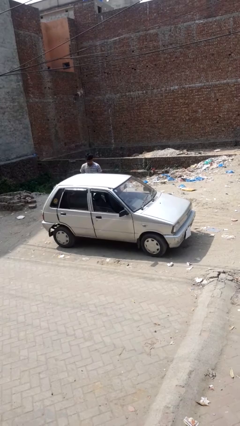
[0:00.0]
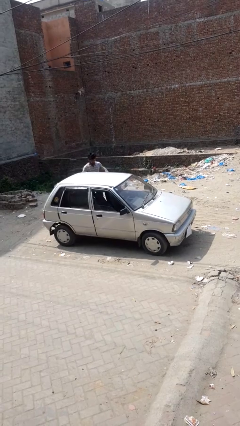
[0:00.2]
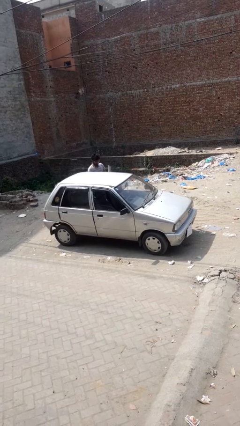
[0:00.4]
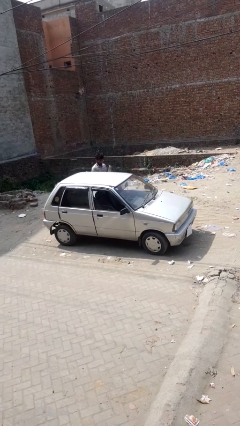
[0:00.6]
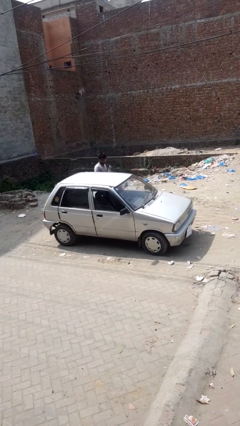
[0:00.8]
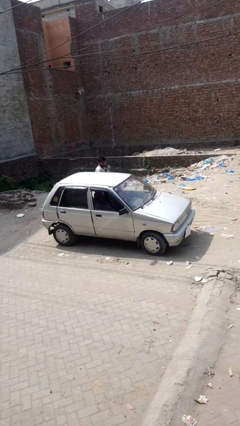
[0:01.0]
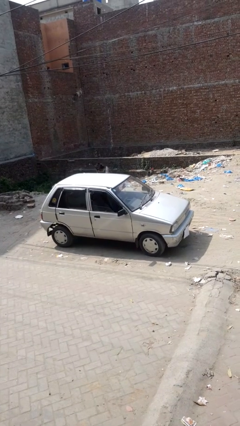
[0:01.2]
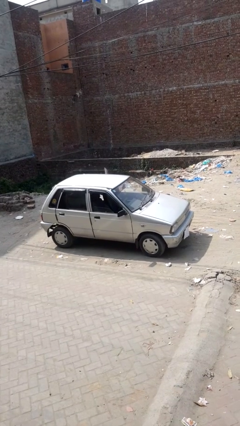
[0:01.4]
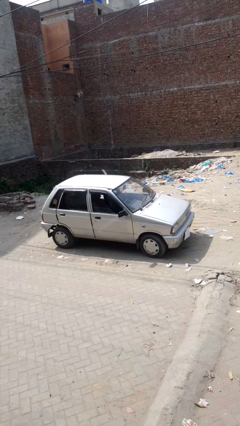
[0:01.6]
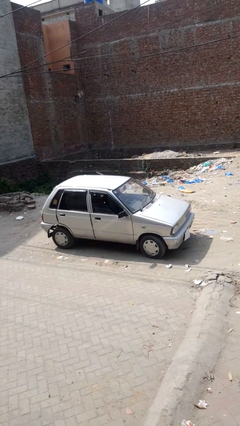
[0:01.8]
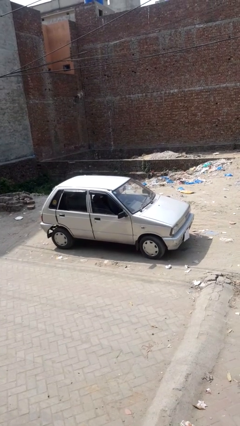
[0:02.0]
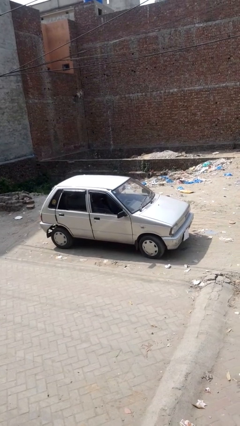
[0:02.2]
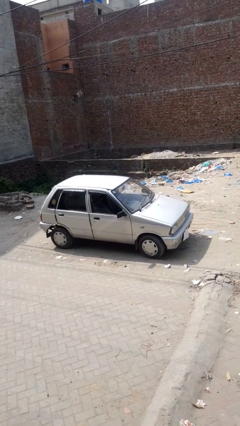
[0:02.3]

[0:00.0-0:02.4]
car picks up person

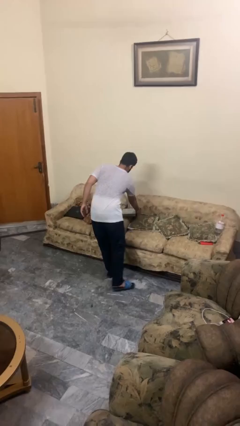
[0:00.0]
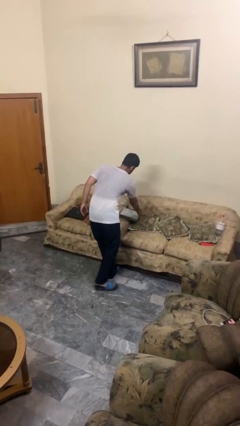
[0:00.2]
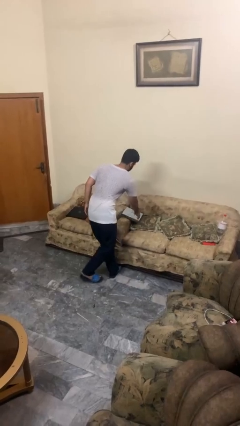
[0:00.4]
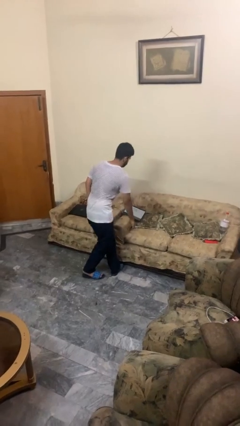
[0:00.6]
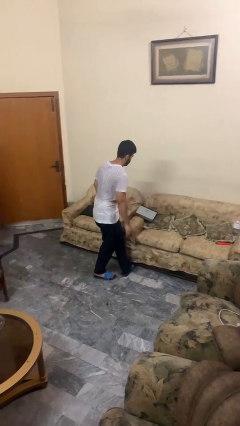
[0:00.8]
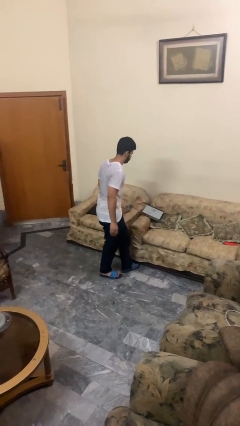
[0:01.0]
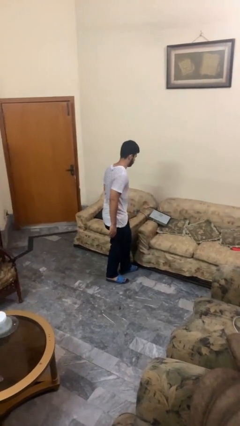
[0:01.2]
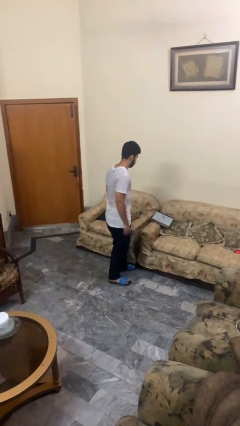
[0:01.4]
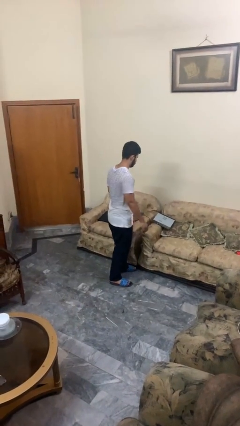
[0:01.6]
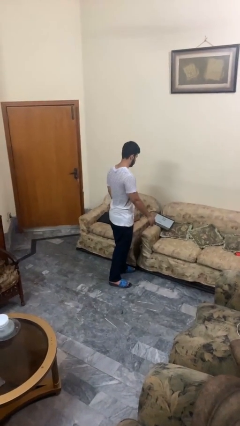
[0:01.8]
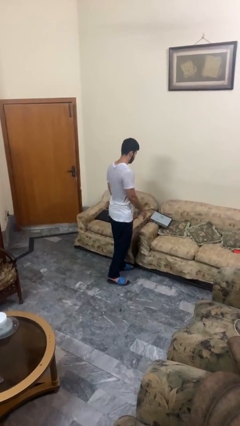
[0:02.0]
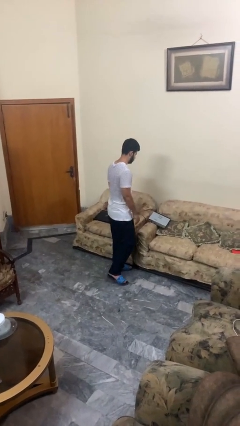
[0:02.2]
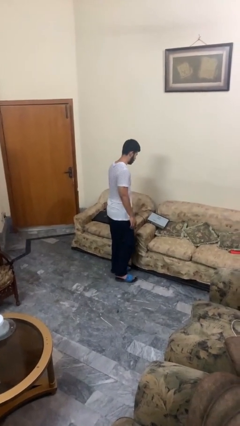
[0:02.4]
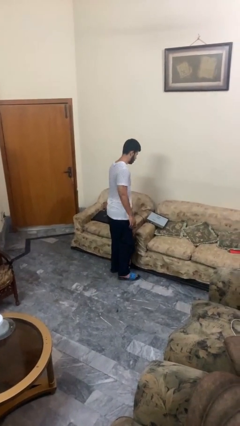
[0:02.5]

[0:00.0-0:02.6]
person puts down object on couch

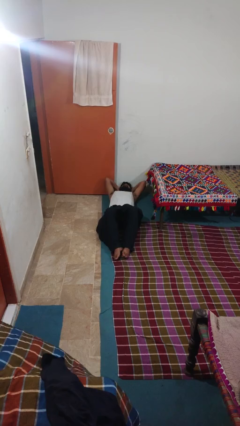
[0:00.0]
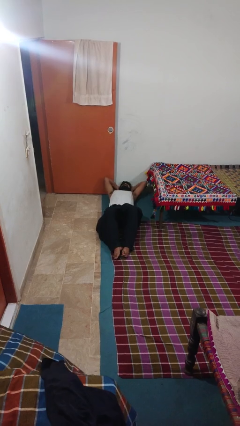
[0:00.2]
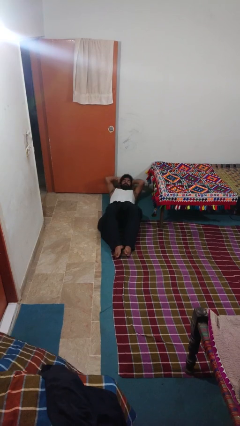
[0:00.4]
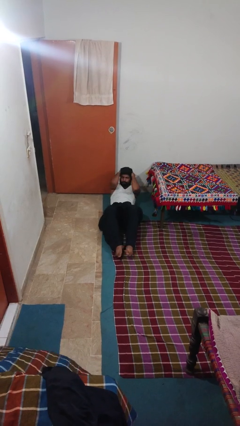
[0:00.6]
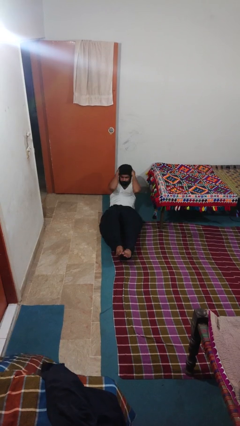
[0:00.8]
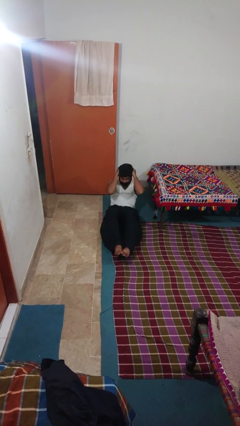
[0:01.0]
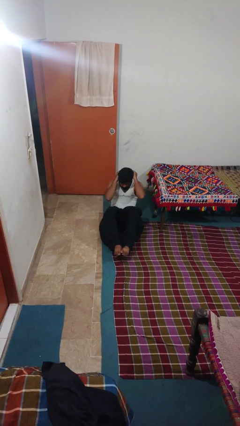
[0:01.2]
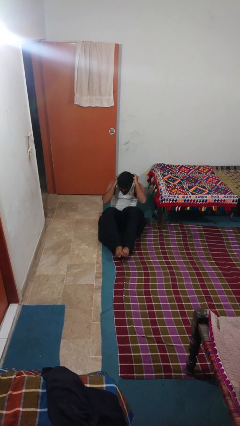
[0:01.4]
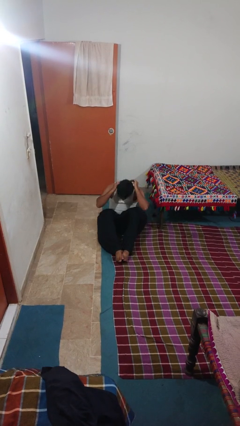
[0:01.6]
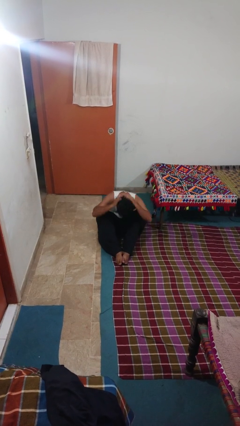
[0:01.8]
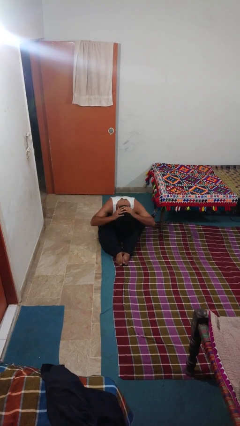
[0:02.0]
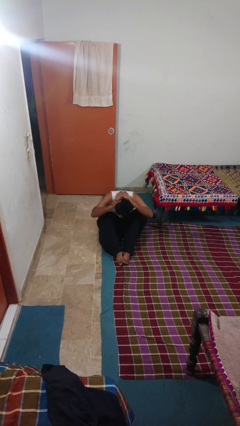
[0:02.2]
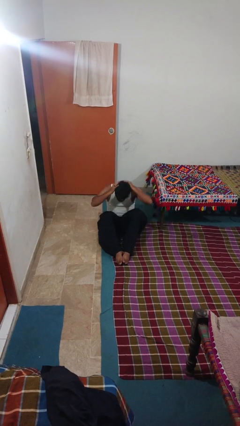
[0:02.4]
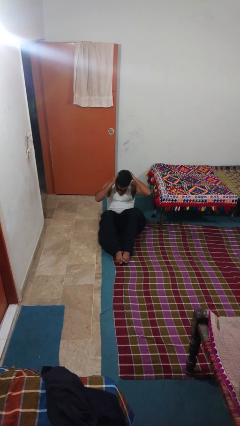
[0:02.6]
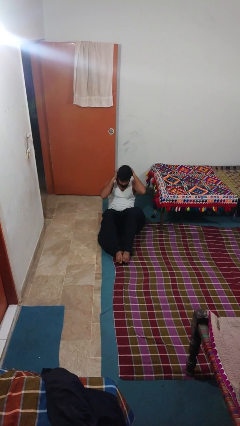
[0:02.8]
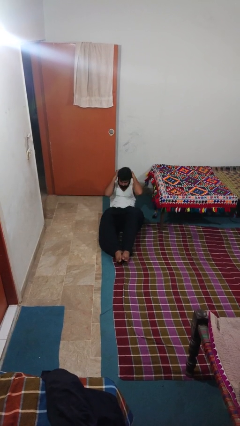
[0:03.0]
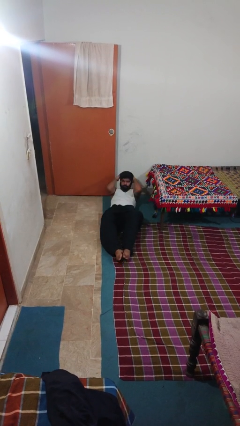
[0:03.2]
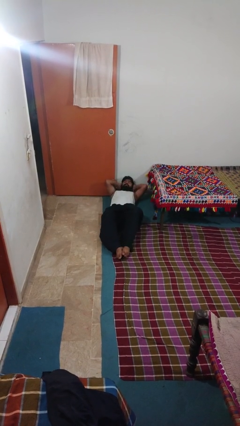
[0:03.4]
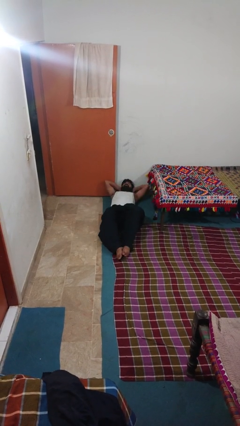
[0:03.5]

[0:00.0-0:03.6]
person exercises with situp

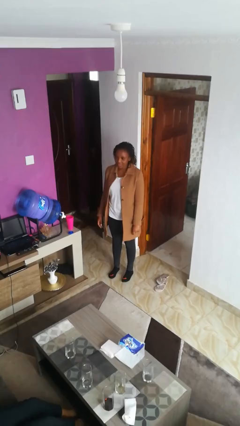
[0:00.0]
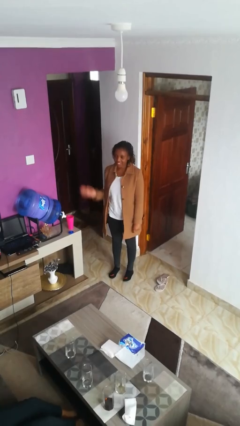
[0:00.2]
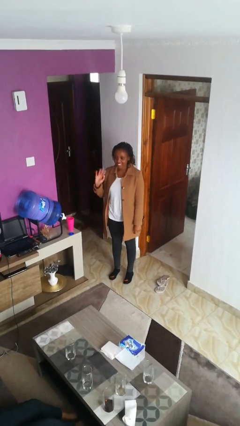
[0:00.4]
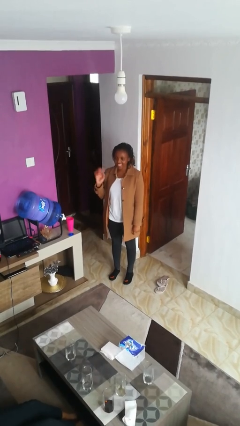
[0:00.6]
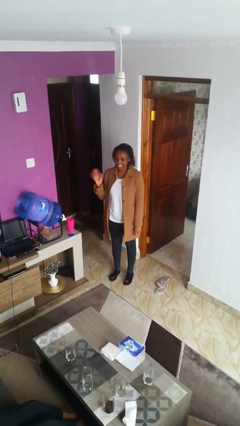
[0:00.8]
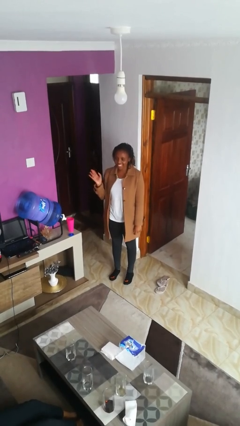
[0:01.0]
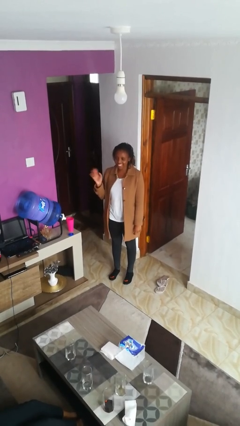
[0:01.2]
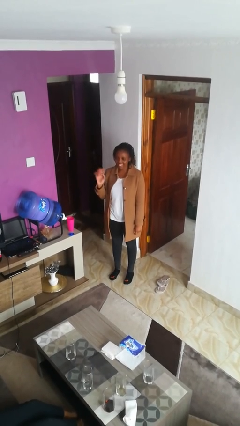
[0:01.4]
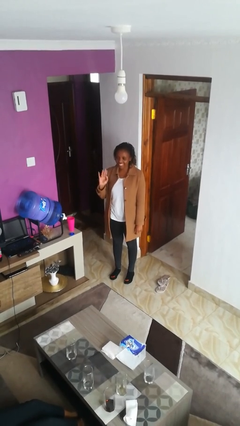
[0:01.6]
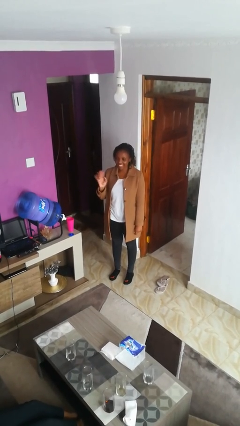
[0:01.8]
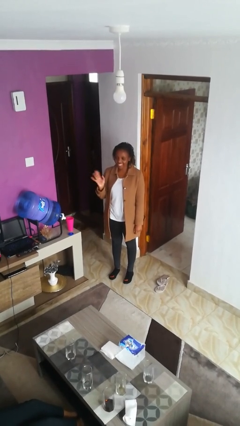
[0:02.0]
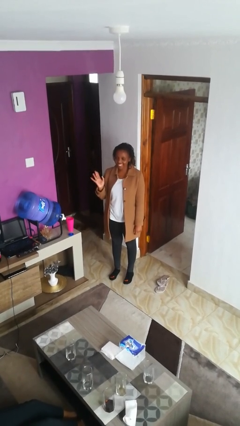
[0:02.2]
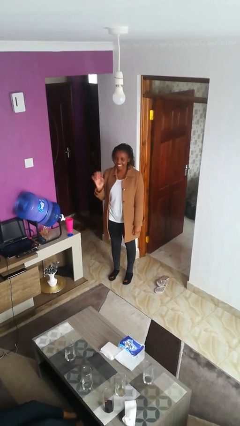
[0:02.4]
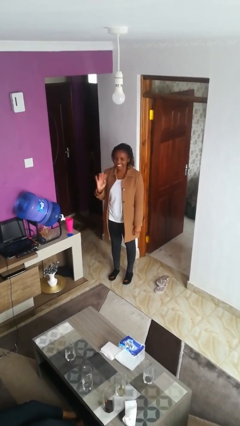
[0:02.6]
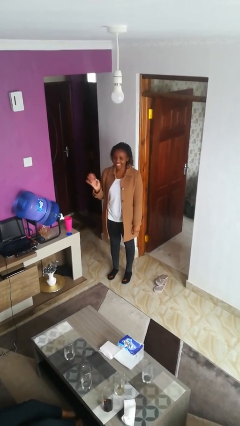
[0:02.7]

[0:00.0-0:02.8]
person waves at person

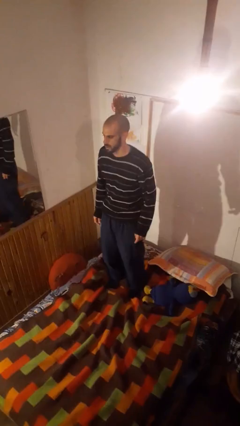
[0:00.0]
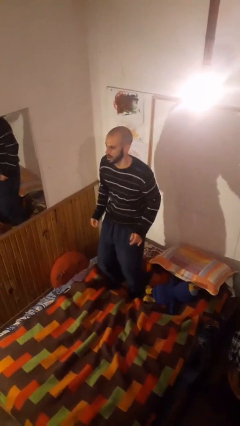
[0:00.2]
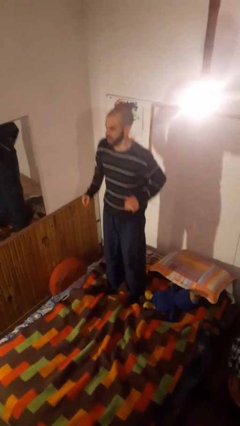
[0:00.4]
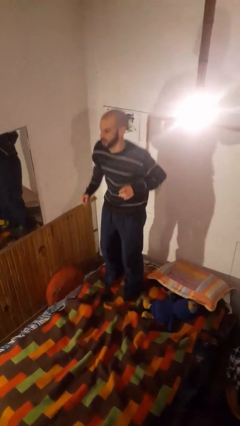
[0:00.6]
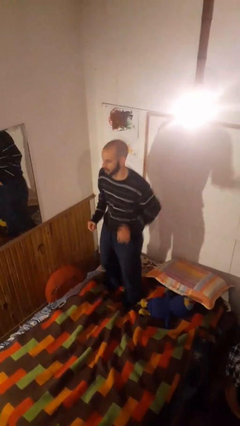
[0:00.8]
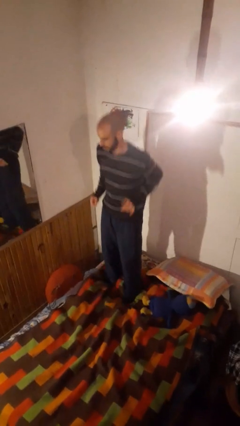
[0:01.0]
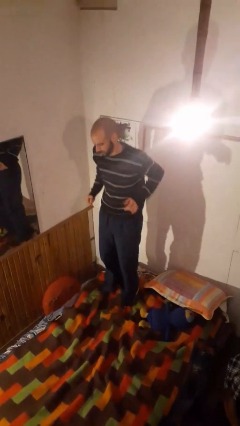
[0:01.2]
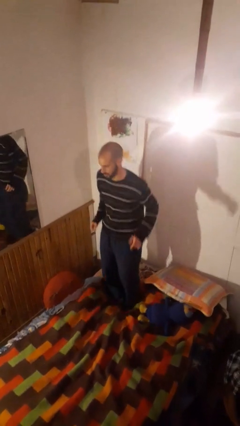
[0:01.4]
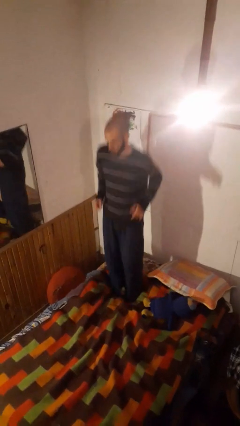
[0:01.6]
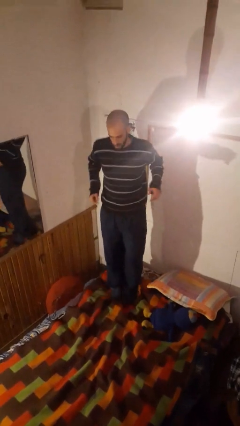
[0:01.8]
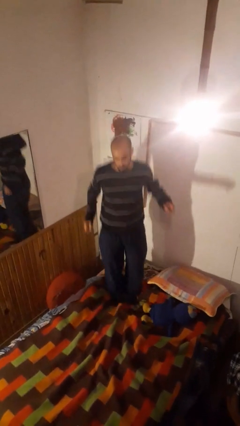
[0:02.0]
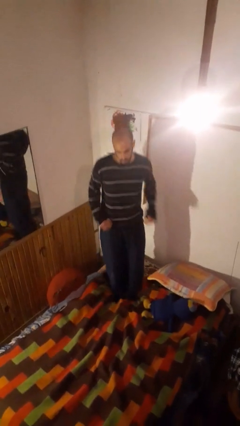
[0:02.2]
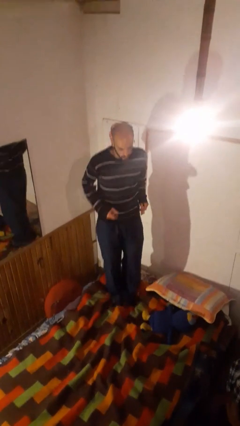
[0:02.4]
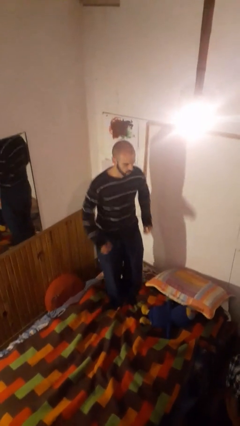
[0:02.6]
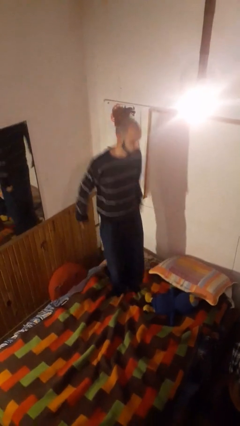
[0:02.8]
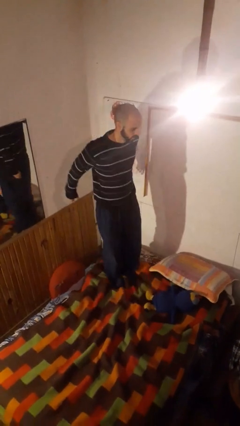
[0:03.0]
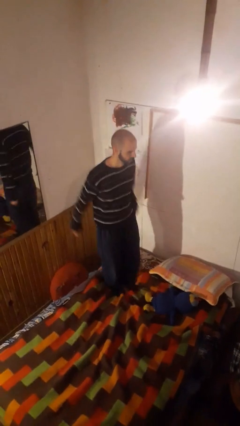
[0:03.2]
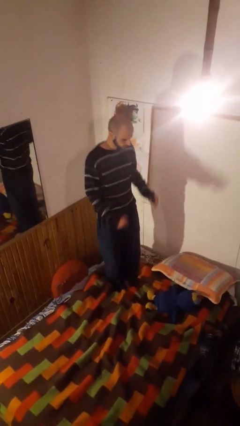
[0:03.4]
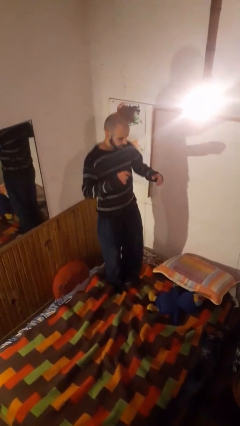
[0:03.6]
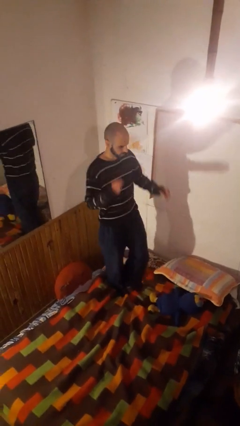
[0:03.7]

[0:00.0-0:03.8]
person jumps on bed

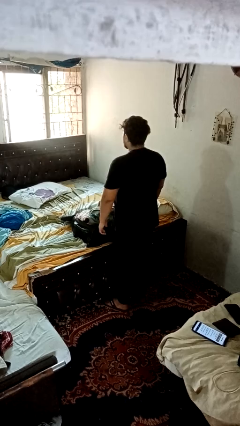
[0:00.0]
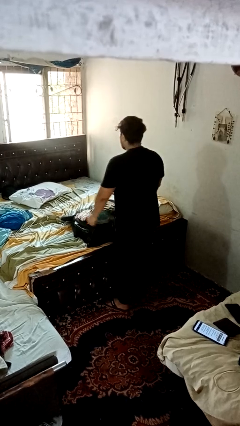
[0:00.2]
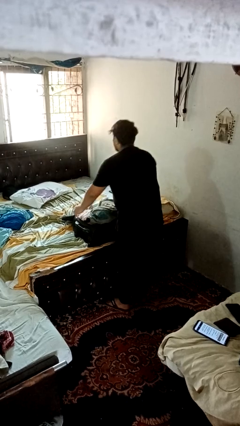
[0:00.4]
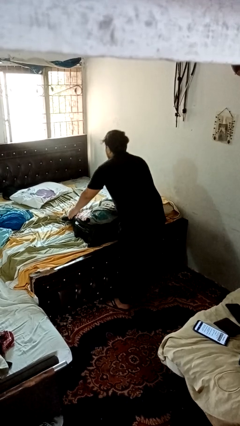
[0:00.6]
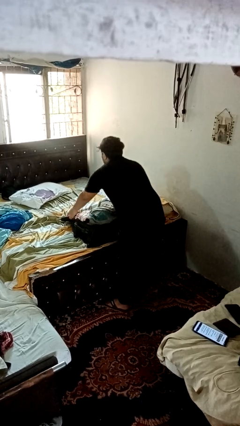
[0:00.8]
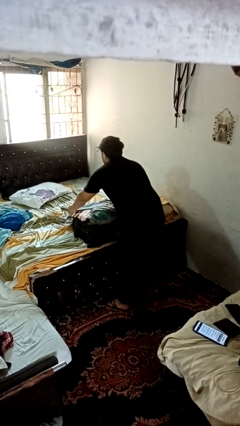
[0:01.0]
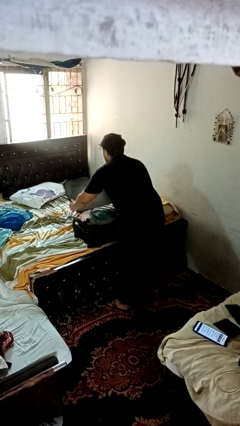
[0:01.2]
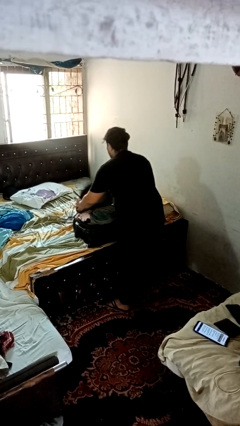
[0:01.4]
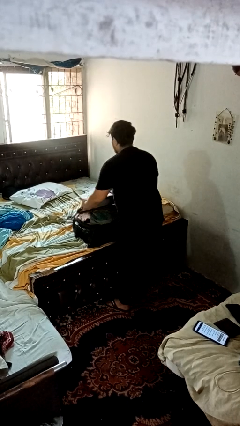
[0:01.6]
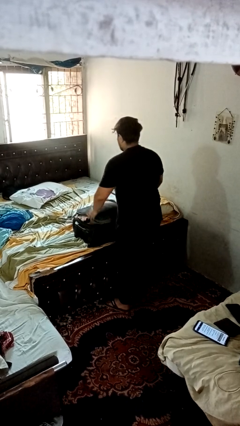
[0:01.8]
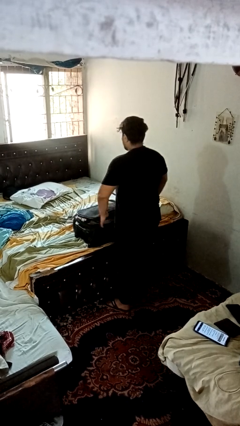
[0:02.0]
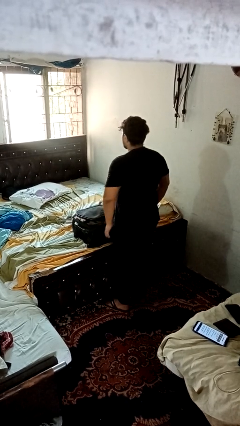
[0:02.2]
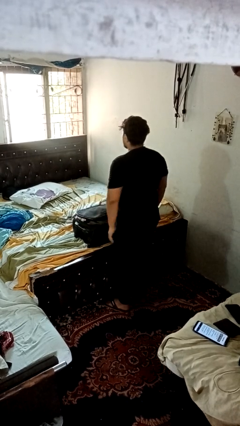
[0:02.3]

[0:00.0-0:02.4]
person closes suitcase
